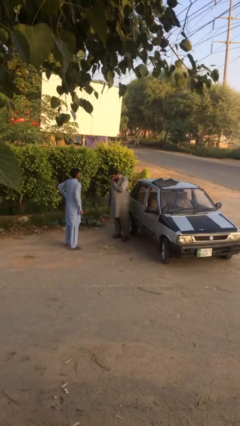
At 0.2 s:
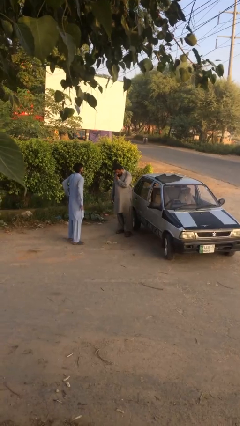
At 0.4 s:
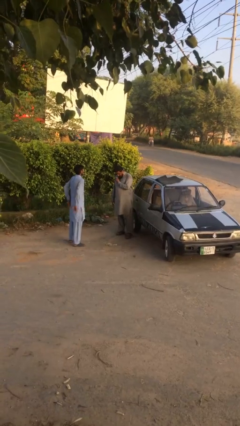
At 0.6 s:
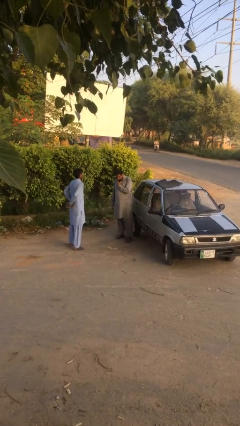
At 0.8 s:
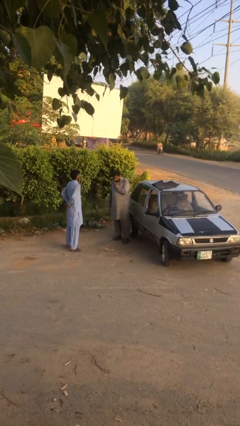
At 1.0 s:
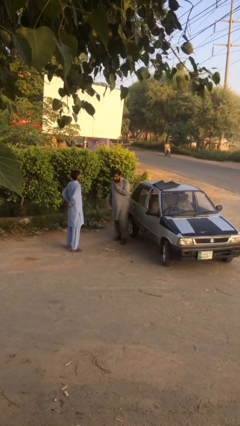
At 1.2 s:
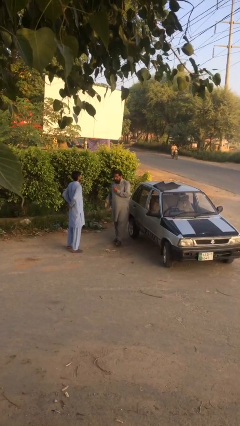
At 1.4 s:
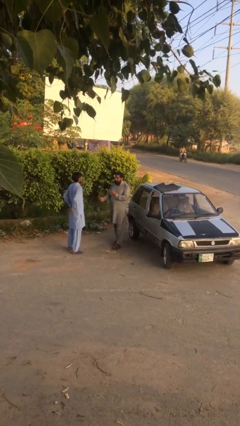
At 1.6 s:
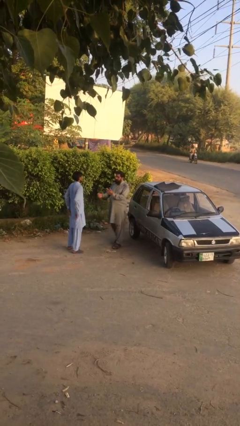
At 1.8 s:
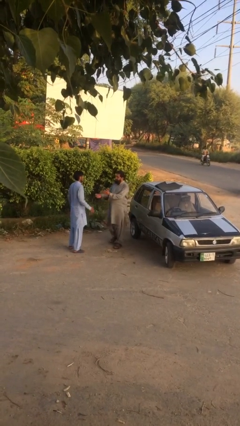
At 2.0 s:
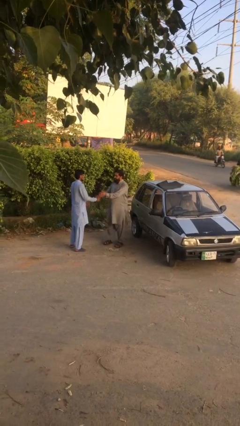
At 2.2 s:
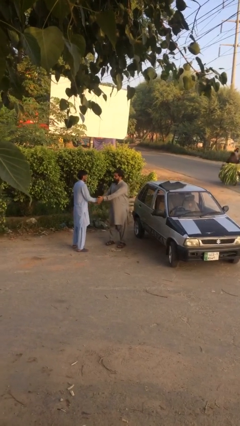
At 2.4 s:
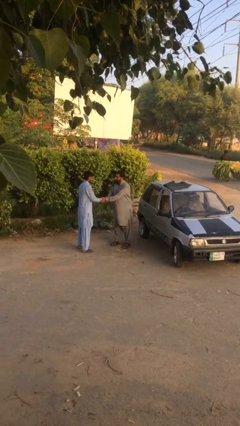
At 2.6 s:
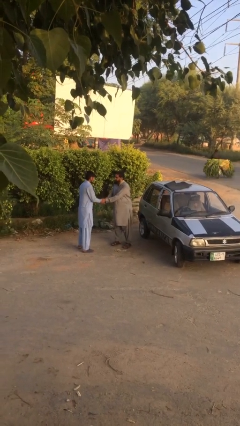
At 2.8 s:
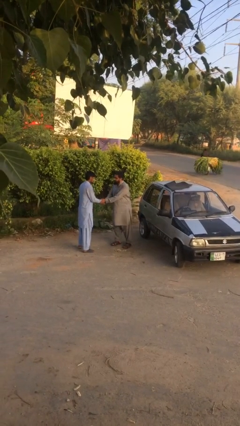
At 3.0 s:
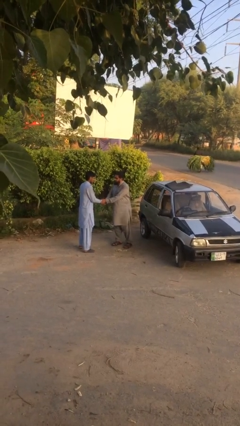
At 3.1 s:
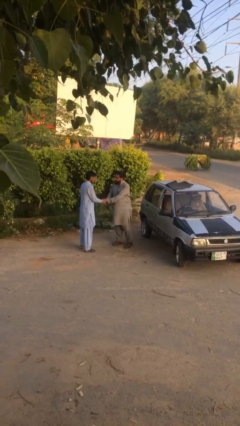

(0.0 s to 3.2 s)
person shakes hand

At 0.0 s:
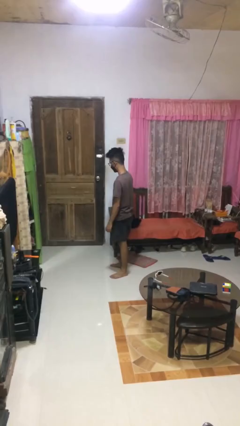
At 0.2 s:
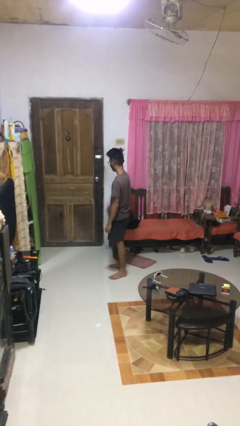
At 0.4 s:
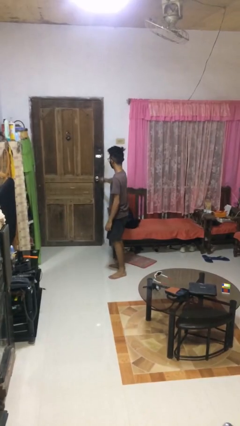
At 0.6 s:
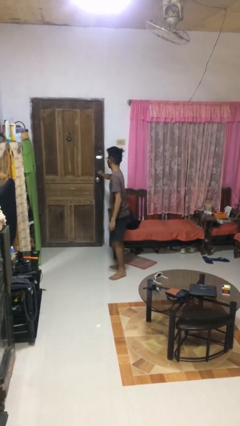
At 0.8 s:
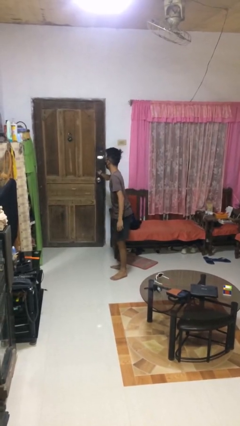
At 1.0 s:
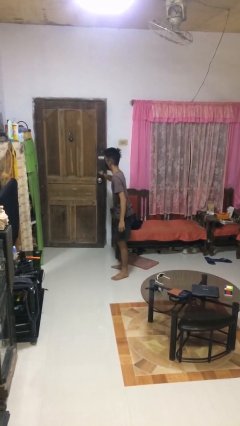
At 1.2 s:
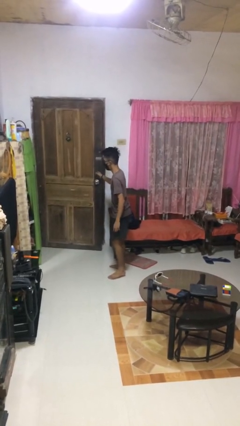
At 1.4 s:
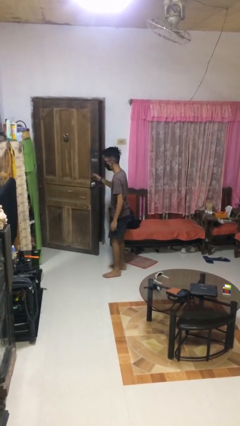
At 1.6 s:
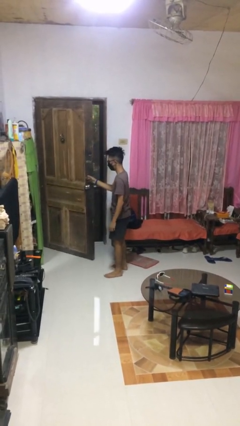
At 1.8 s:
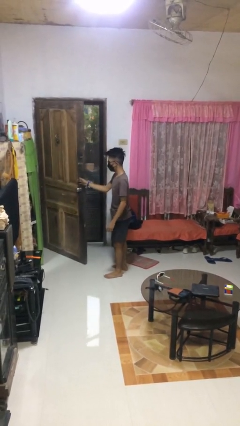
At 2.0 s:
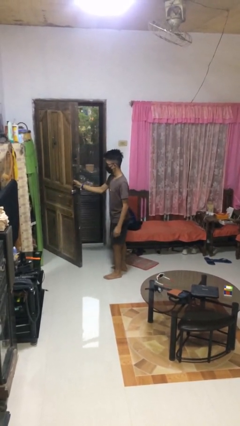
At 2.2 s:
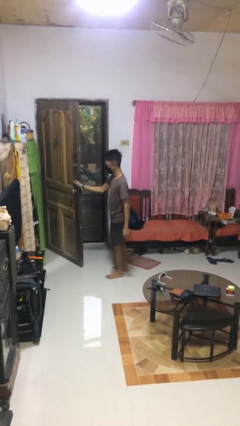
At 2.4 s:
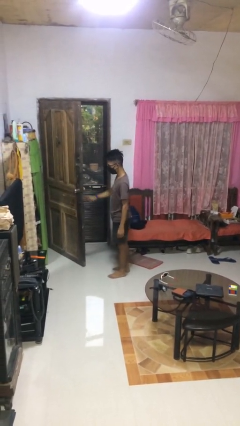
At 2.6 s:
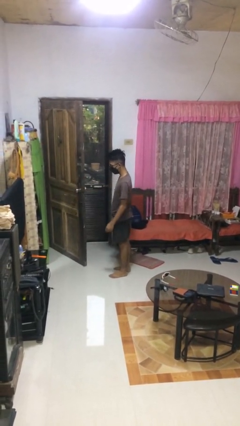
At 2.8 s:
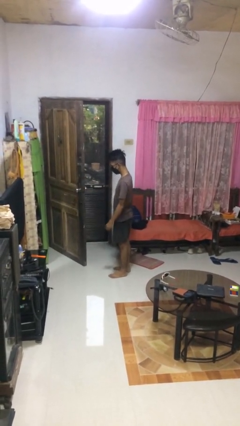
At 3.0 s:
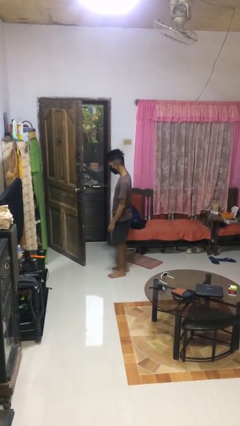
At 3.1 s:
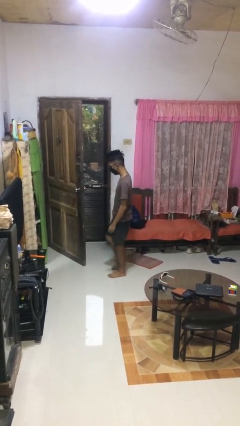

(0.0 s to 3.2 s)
person opens facility door

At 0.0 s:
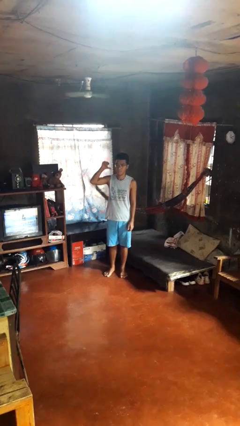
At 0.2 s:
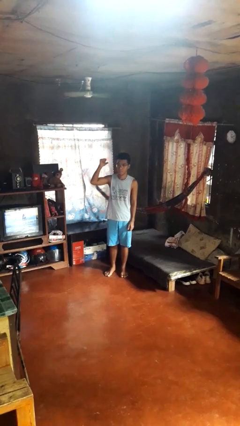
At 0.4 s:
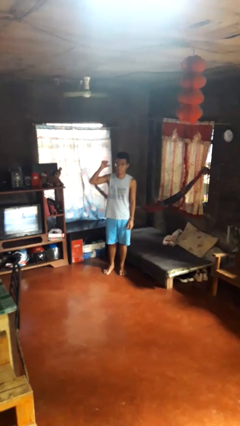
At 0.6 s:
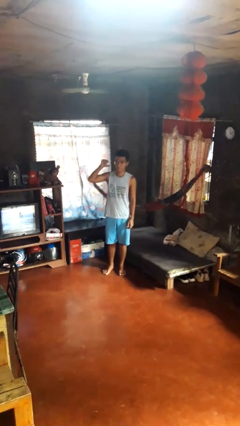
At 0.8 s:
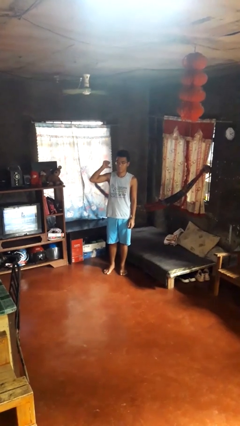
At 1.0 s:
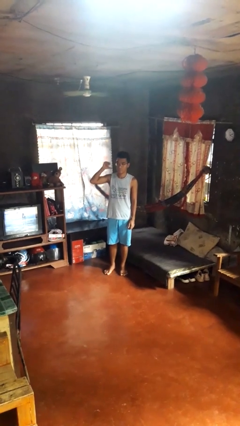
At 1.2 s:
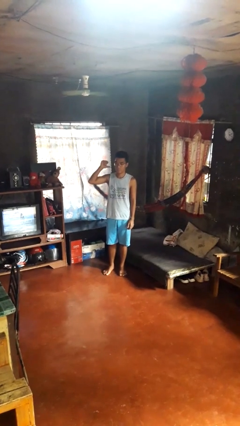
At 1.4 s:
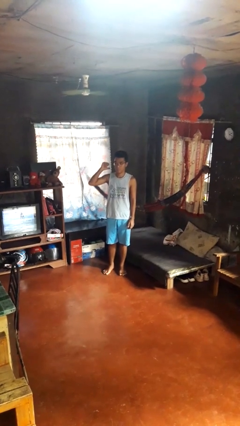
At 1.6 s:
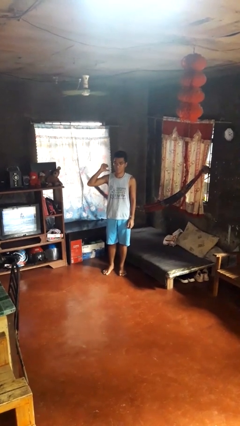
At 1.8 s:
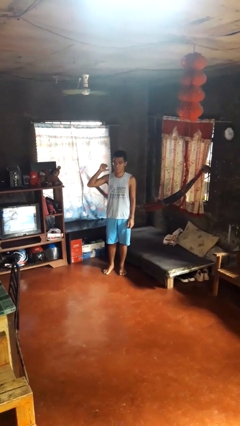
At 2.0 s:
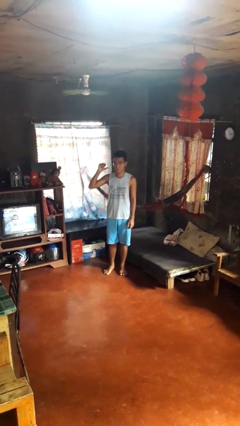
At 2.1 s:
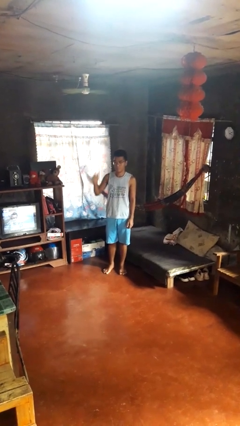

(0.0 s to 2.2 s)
person gestures behind me

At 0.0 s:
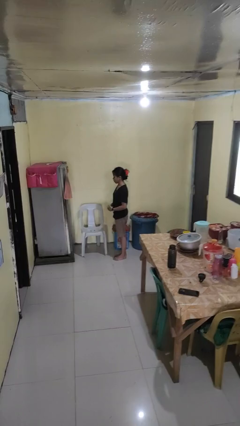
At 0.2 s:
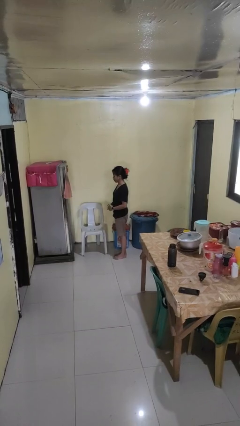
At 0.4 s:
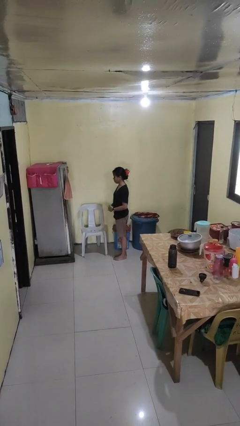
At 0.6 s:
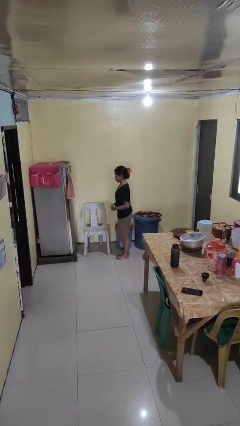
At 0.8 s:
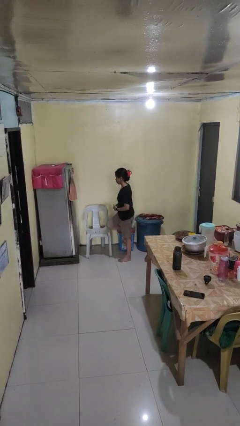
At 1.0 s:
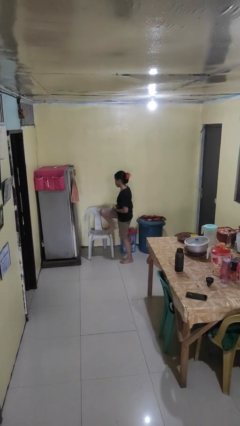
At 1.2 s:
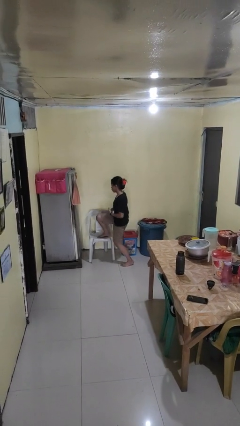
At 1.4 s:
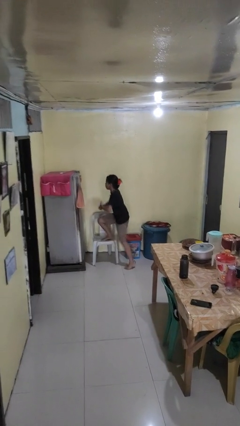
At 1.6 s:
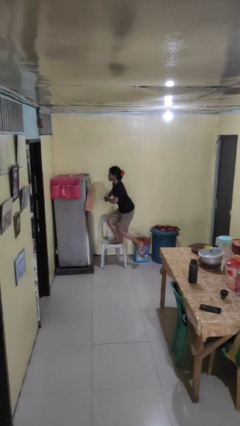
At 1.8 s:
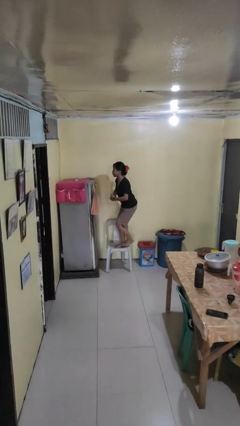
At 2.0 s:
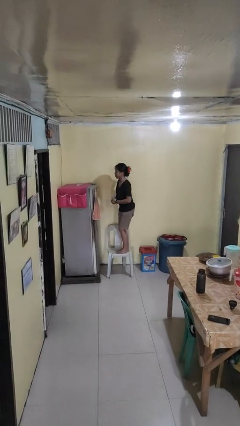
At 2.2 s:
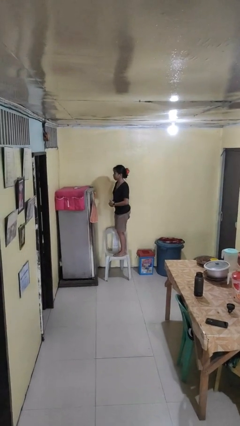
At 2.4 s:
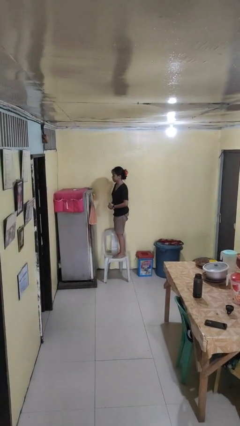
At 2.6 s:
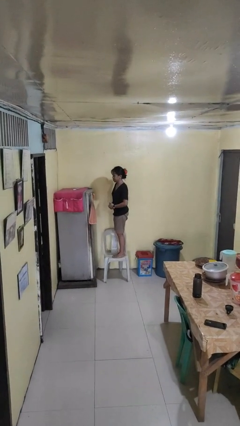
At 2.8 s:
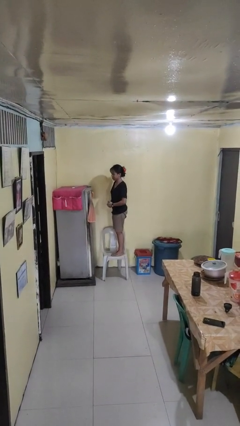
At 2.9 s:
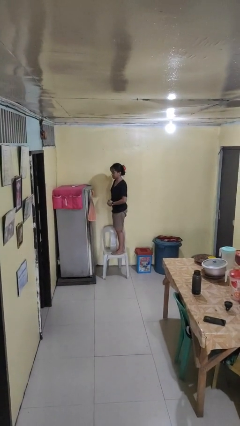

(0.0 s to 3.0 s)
person climbs on chair

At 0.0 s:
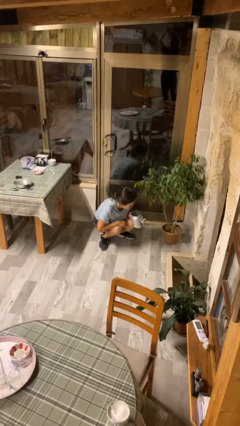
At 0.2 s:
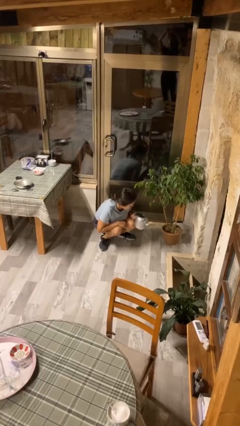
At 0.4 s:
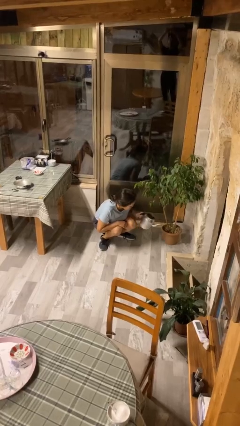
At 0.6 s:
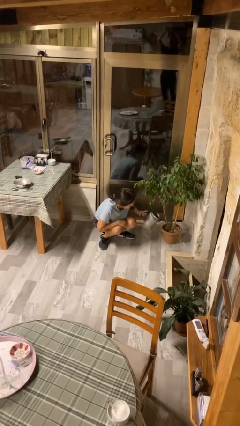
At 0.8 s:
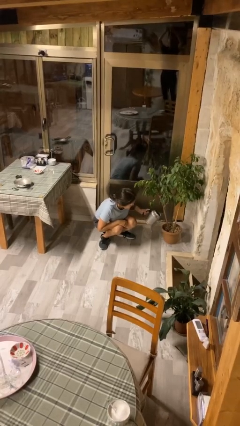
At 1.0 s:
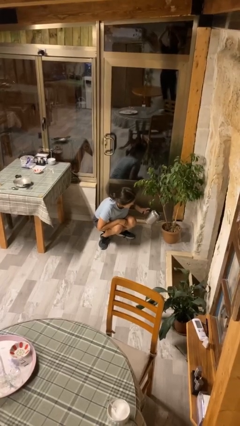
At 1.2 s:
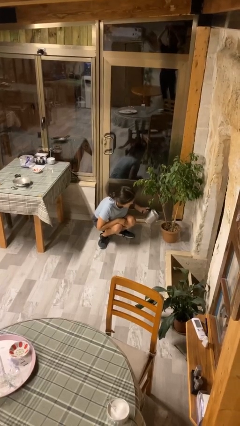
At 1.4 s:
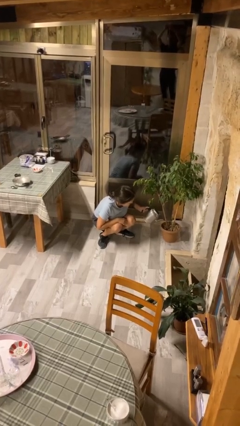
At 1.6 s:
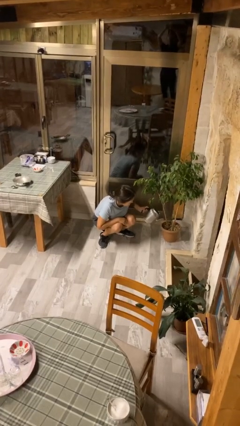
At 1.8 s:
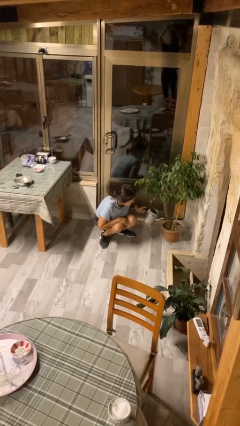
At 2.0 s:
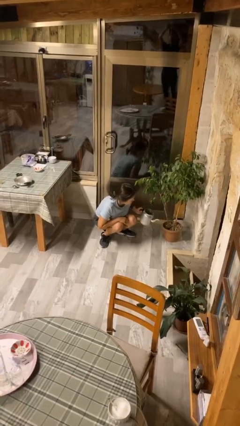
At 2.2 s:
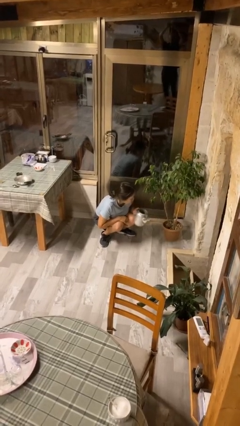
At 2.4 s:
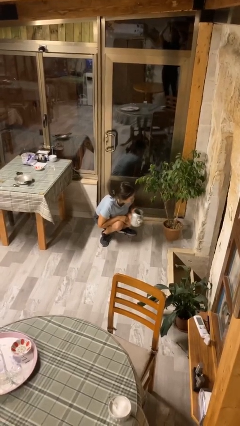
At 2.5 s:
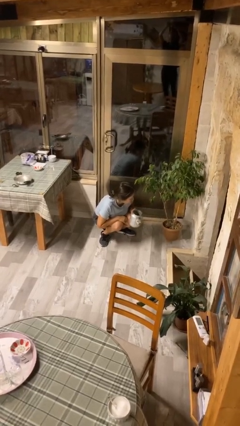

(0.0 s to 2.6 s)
person waters houseplant

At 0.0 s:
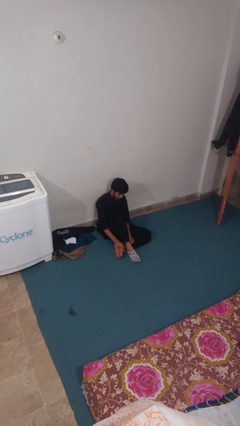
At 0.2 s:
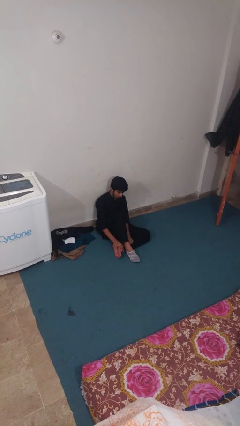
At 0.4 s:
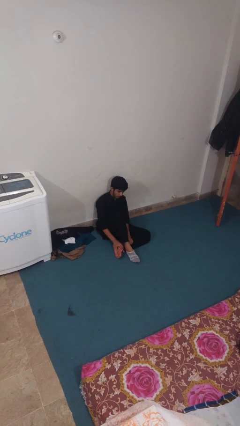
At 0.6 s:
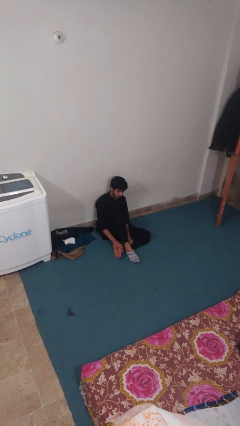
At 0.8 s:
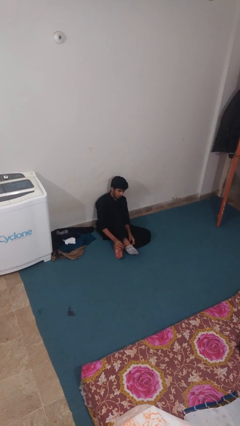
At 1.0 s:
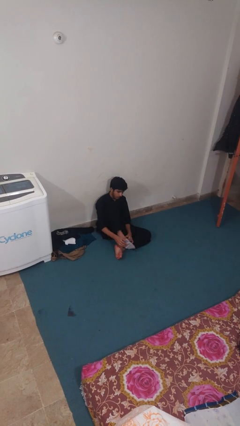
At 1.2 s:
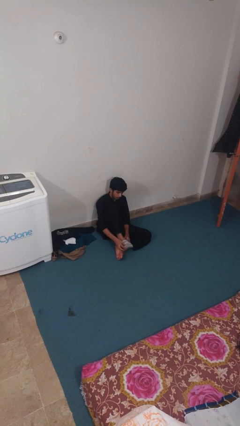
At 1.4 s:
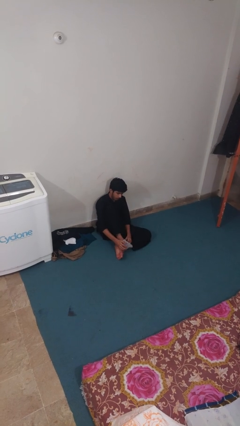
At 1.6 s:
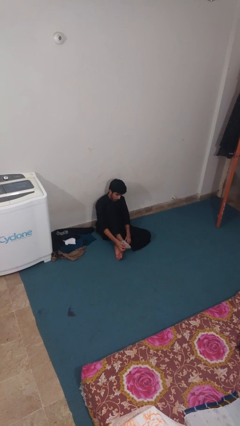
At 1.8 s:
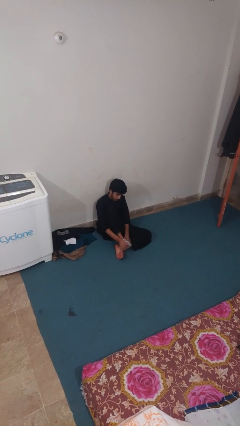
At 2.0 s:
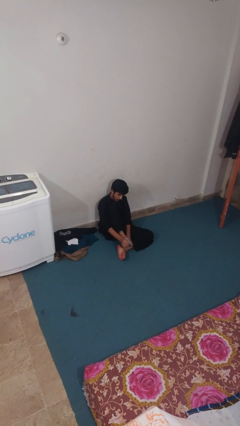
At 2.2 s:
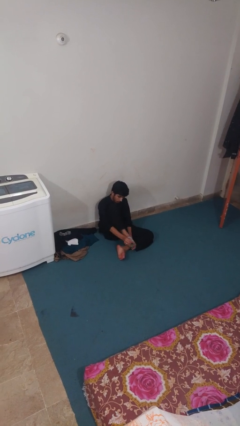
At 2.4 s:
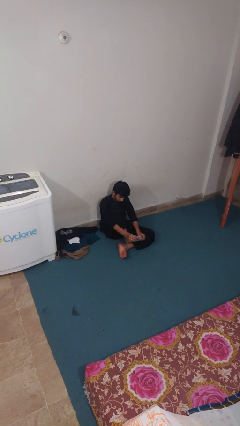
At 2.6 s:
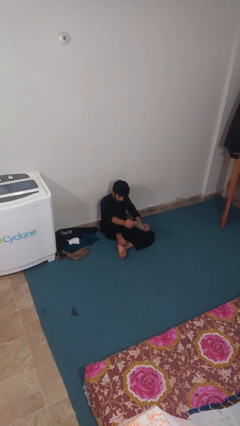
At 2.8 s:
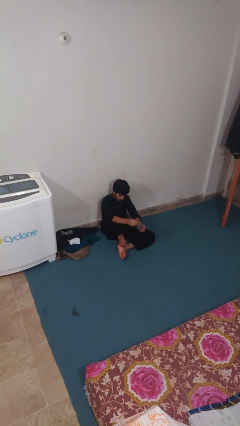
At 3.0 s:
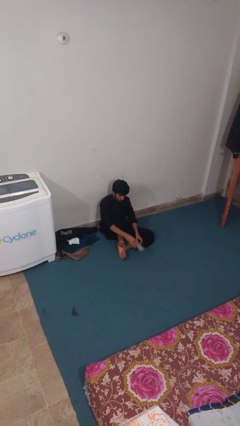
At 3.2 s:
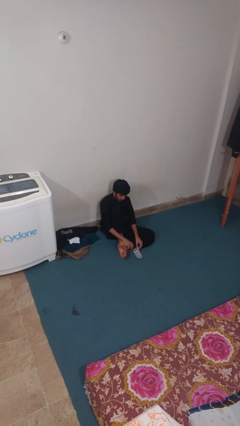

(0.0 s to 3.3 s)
person takes off socks
